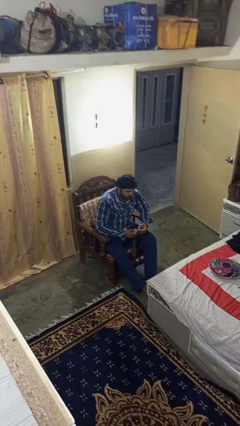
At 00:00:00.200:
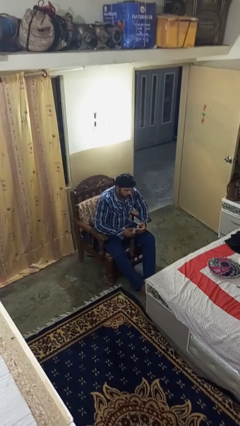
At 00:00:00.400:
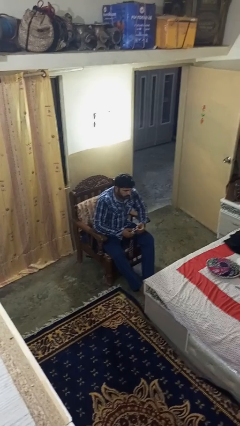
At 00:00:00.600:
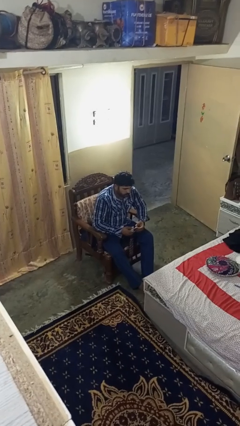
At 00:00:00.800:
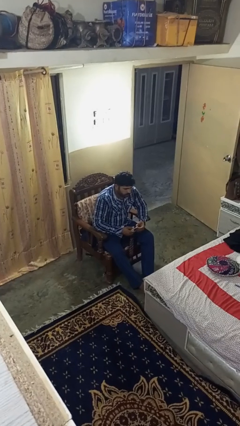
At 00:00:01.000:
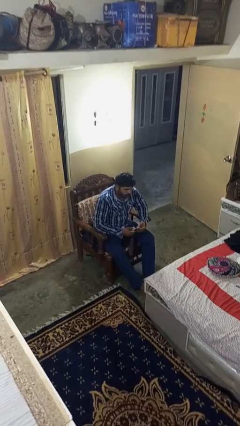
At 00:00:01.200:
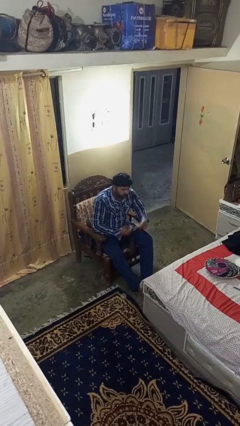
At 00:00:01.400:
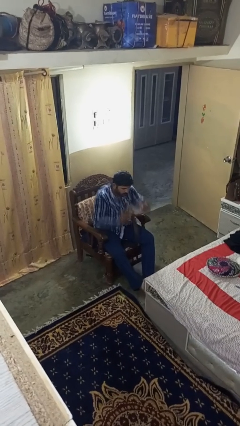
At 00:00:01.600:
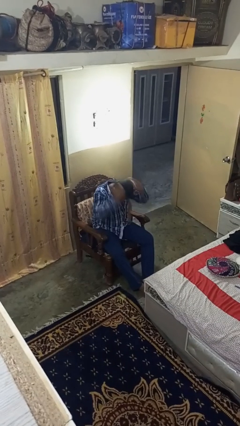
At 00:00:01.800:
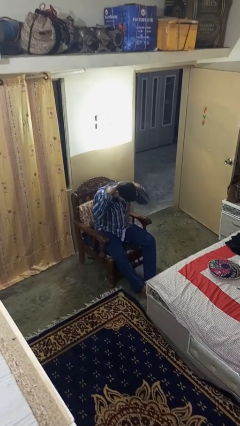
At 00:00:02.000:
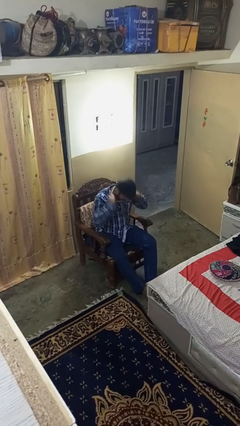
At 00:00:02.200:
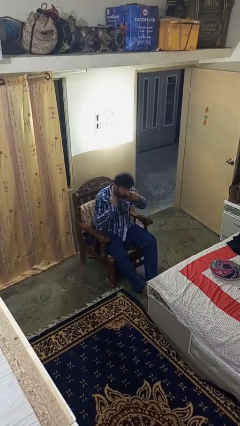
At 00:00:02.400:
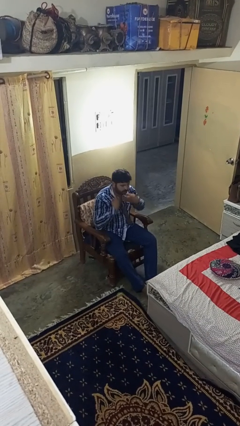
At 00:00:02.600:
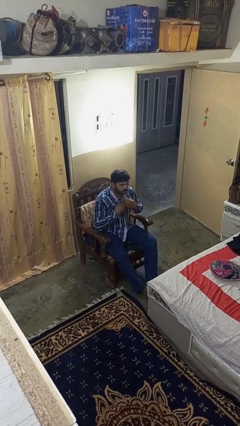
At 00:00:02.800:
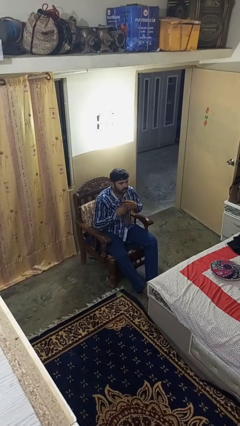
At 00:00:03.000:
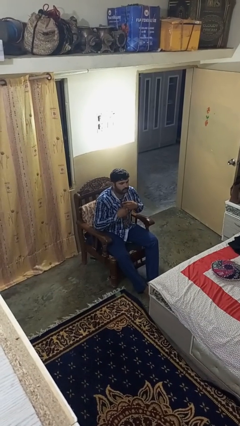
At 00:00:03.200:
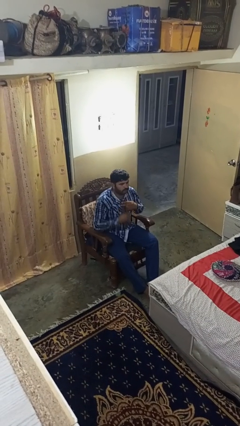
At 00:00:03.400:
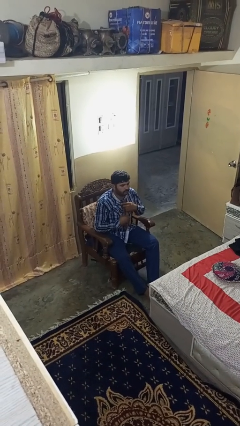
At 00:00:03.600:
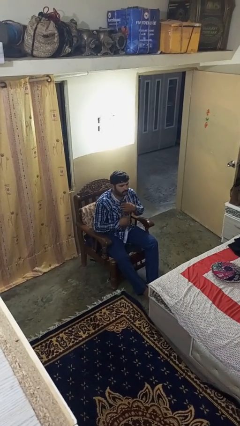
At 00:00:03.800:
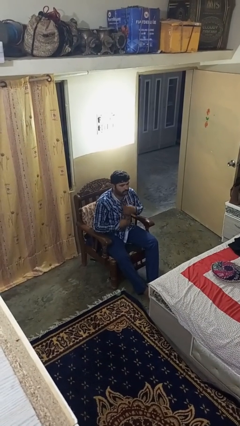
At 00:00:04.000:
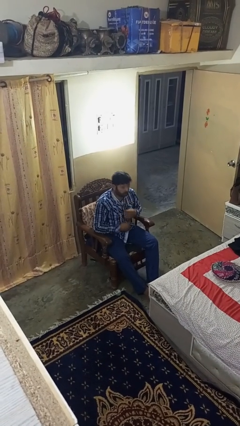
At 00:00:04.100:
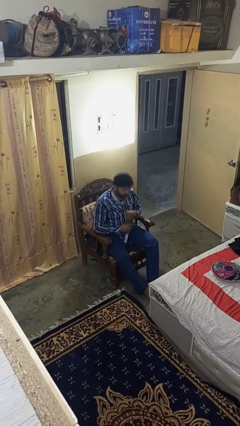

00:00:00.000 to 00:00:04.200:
person puts on necktie

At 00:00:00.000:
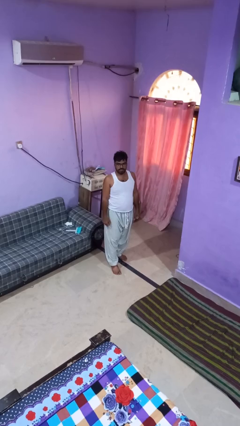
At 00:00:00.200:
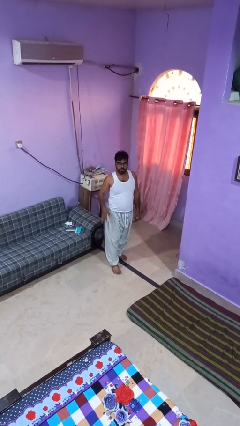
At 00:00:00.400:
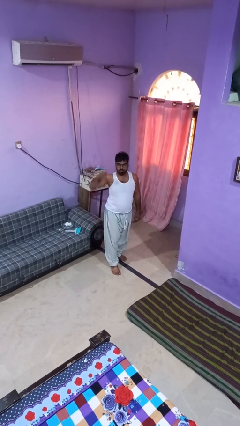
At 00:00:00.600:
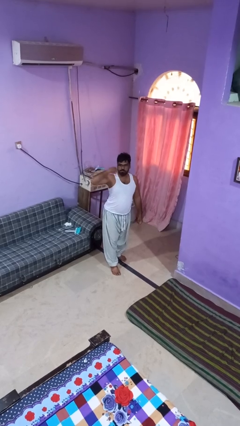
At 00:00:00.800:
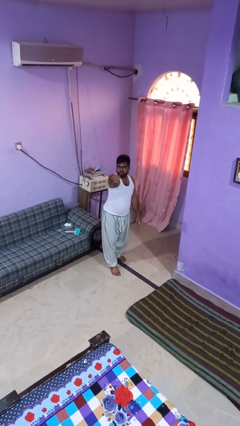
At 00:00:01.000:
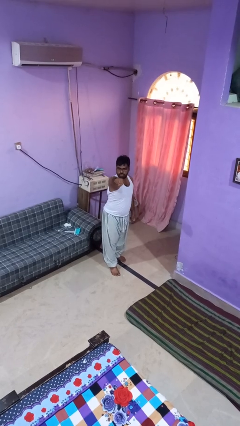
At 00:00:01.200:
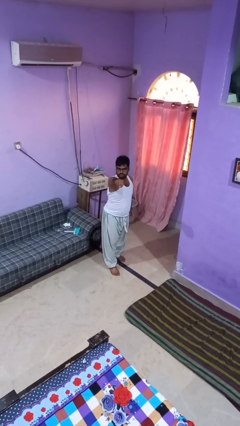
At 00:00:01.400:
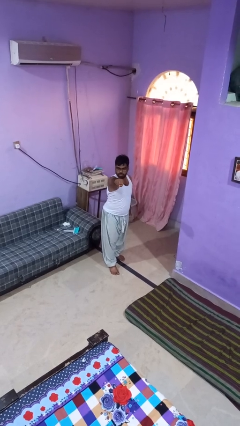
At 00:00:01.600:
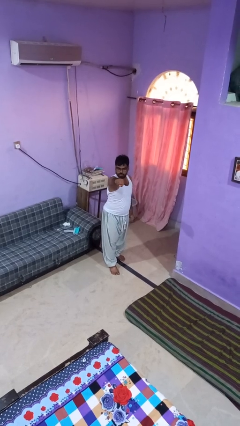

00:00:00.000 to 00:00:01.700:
person punches

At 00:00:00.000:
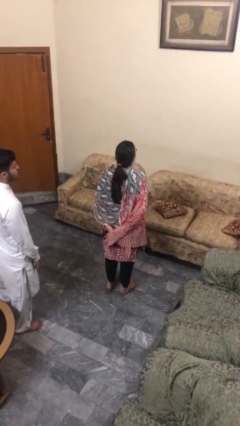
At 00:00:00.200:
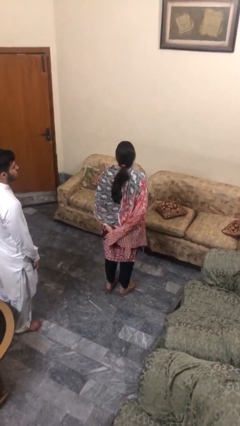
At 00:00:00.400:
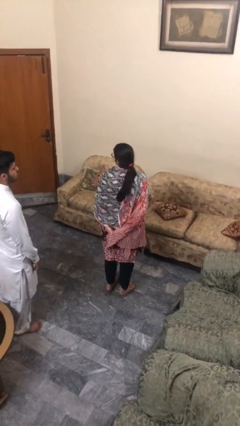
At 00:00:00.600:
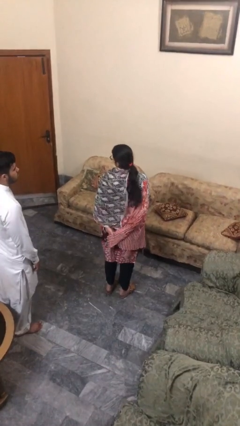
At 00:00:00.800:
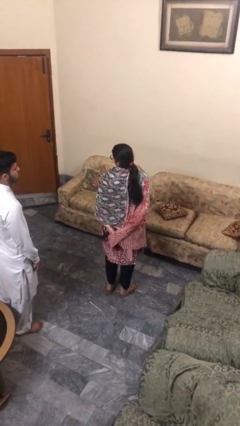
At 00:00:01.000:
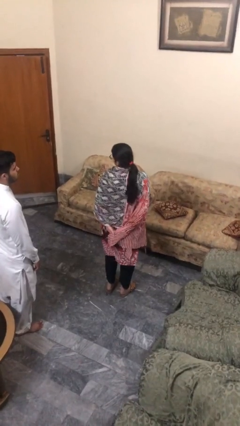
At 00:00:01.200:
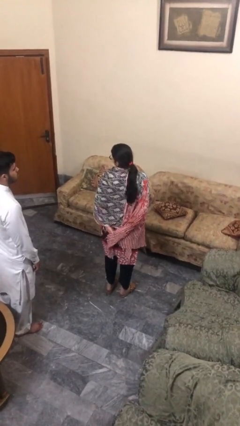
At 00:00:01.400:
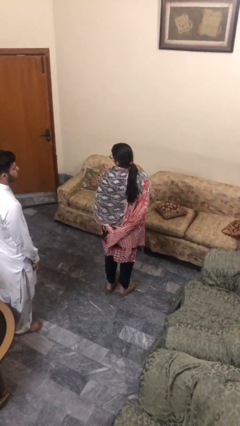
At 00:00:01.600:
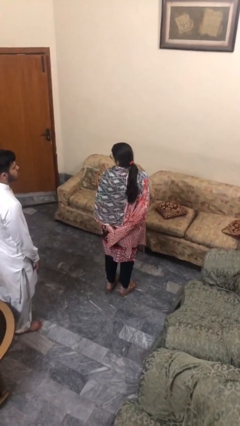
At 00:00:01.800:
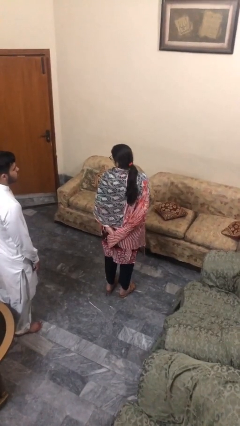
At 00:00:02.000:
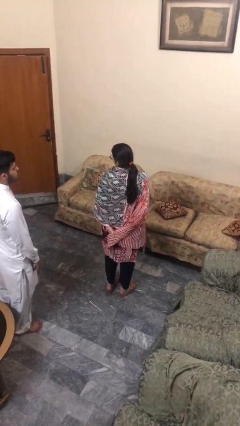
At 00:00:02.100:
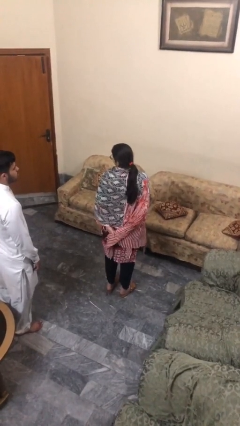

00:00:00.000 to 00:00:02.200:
person looks over shoulder

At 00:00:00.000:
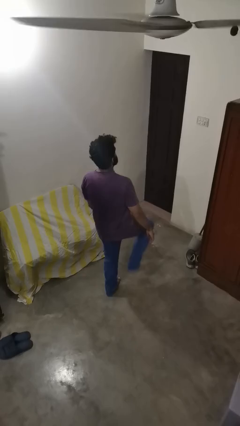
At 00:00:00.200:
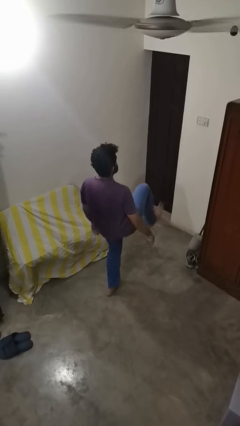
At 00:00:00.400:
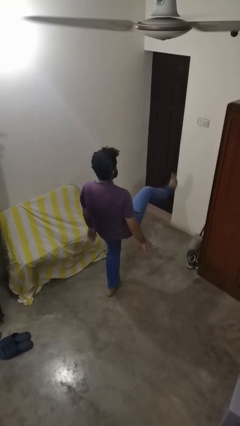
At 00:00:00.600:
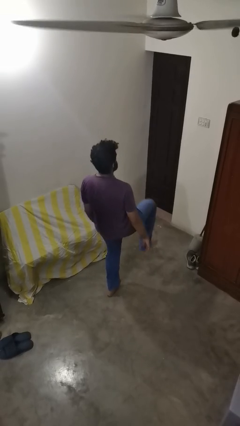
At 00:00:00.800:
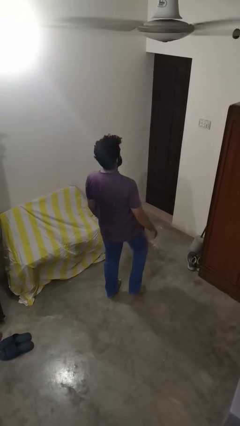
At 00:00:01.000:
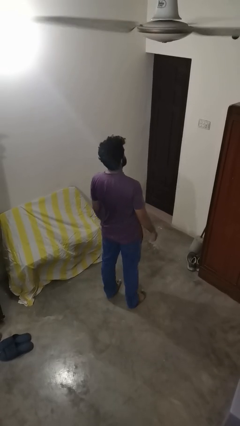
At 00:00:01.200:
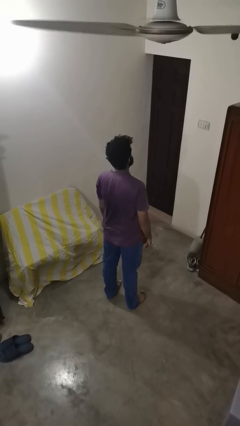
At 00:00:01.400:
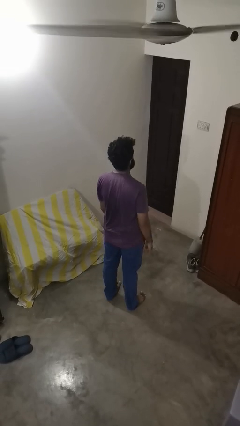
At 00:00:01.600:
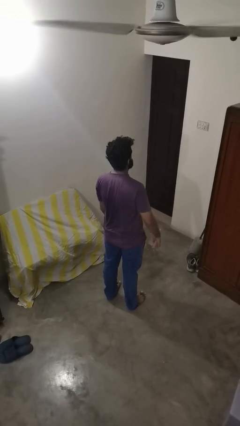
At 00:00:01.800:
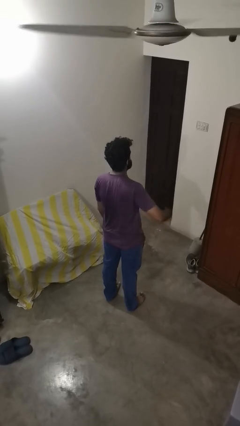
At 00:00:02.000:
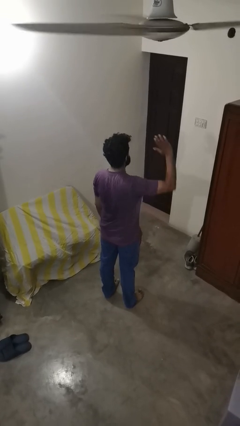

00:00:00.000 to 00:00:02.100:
person karate kicks

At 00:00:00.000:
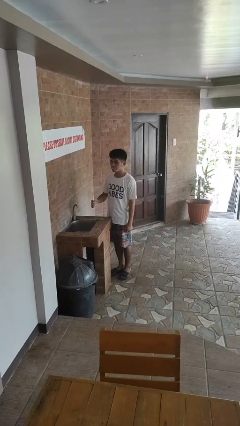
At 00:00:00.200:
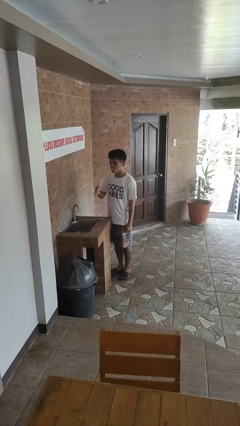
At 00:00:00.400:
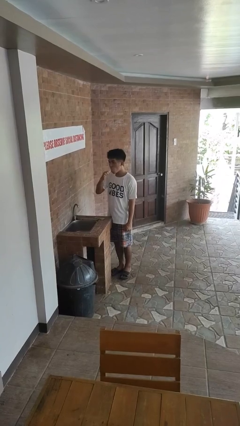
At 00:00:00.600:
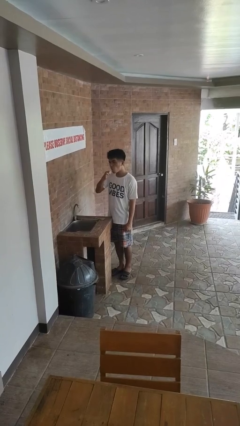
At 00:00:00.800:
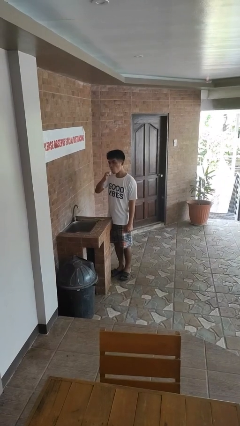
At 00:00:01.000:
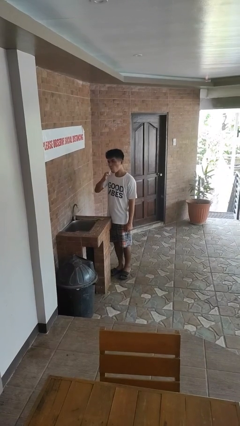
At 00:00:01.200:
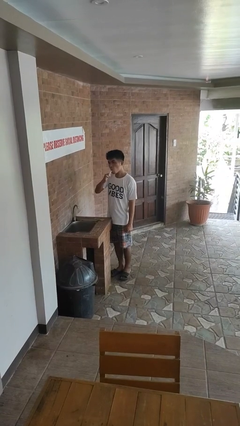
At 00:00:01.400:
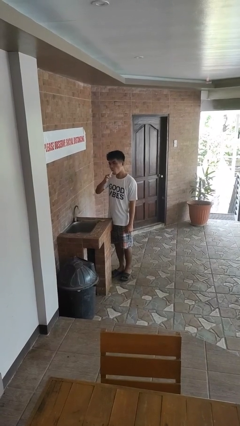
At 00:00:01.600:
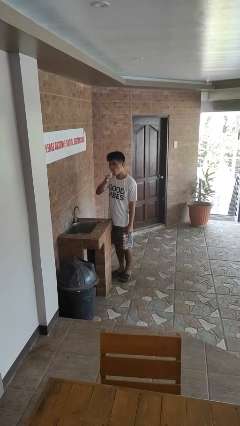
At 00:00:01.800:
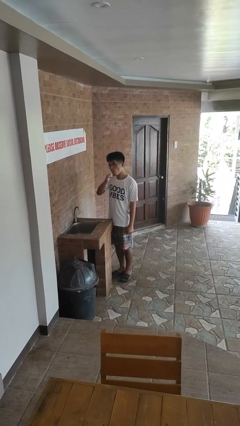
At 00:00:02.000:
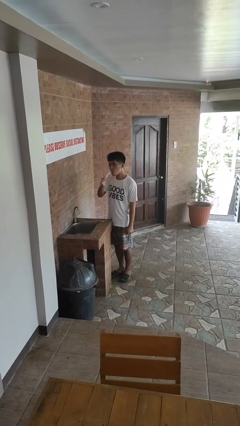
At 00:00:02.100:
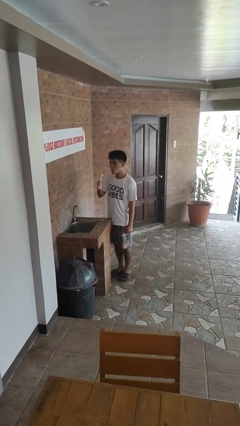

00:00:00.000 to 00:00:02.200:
person brushes teeth

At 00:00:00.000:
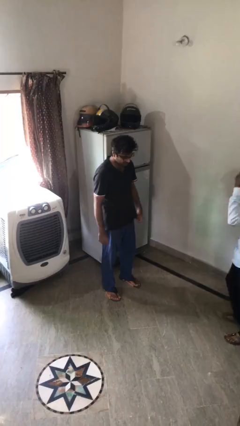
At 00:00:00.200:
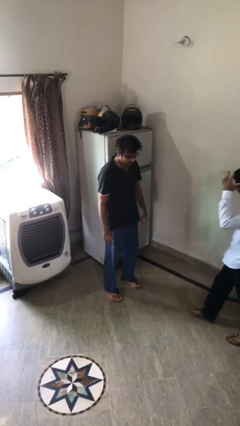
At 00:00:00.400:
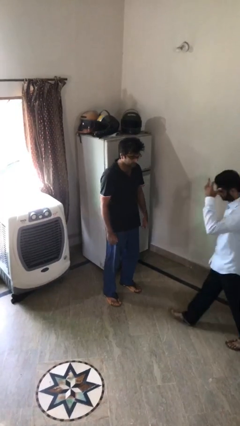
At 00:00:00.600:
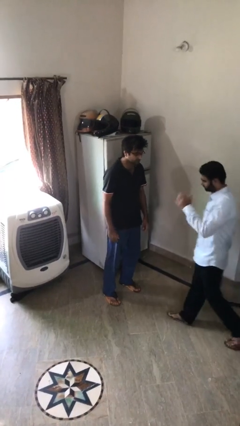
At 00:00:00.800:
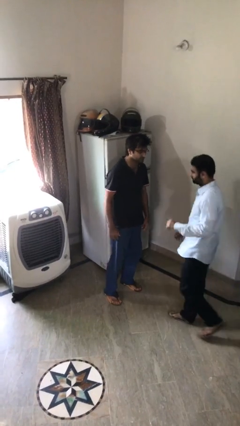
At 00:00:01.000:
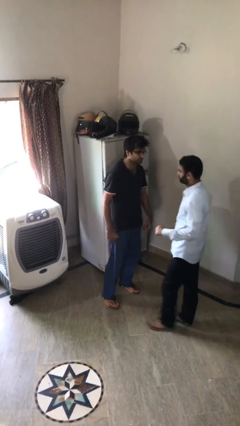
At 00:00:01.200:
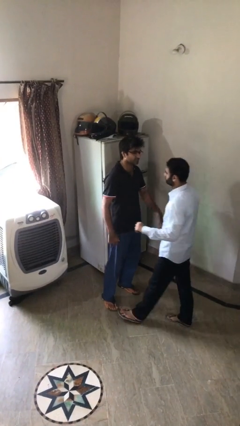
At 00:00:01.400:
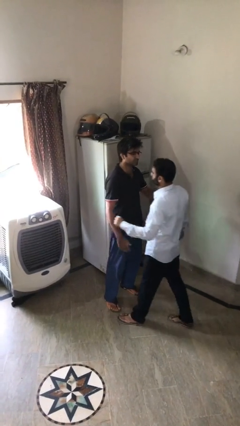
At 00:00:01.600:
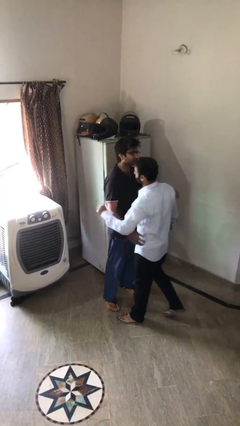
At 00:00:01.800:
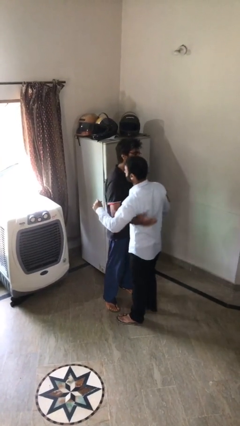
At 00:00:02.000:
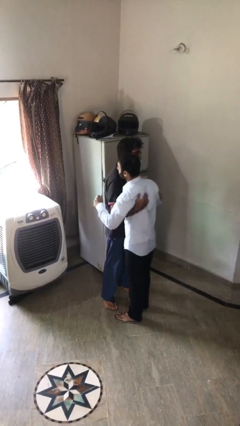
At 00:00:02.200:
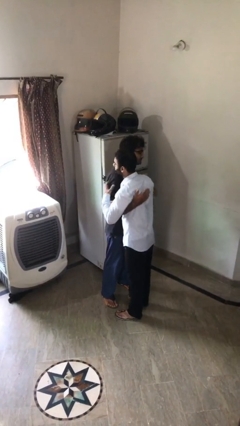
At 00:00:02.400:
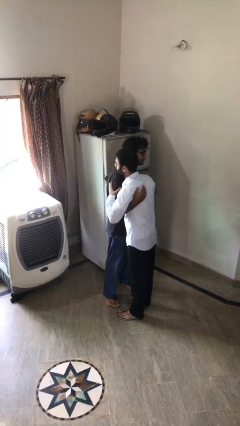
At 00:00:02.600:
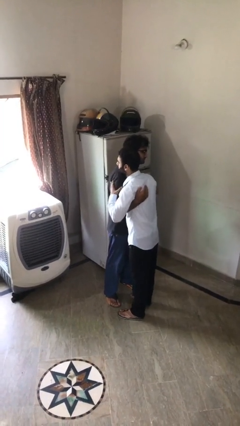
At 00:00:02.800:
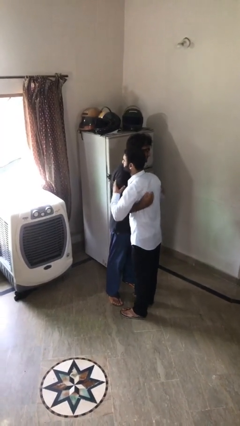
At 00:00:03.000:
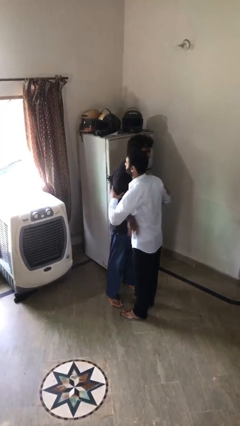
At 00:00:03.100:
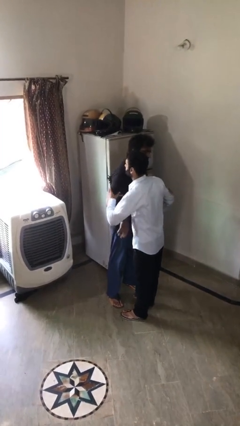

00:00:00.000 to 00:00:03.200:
person embraces person

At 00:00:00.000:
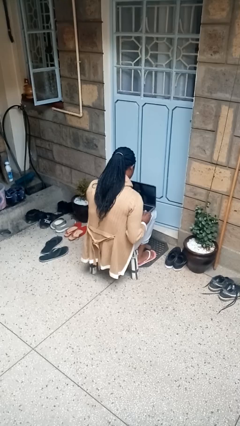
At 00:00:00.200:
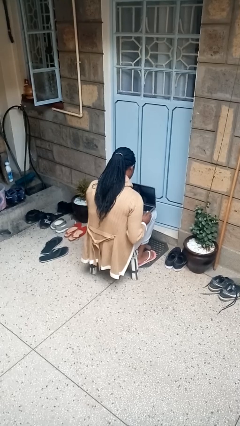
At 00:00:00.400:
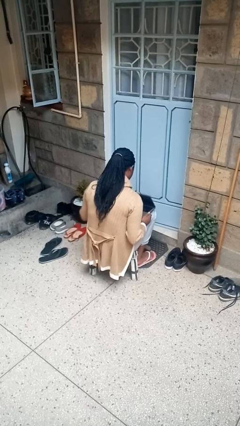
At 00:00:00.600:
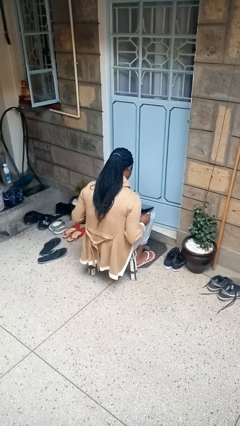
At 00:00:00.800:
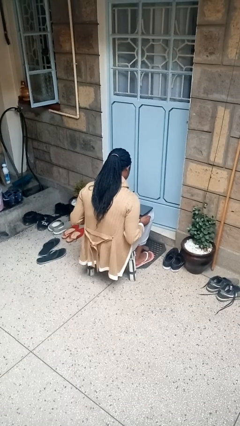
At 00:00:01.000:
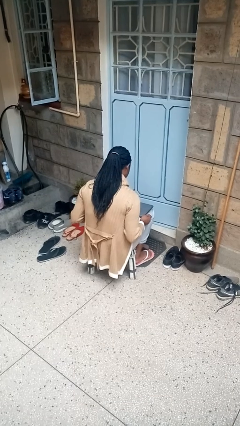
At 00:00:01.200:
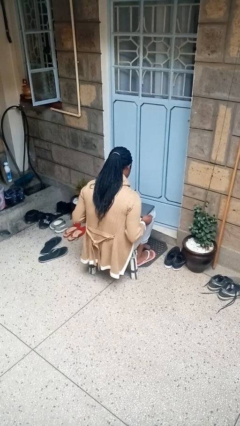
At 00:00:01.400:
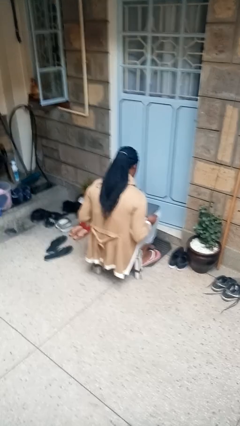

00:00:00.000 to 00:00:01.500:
person closes laptop
